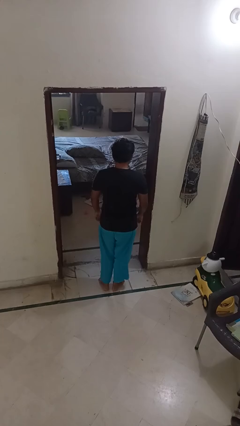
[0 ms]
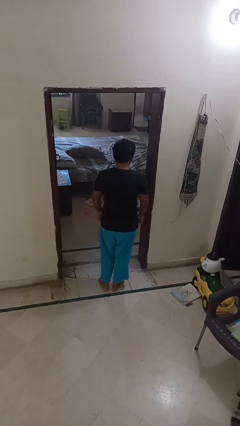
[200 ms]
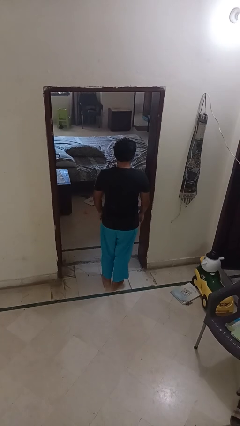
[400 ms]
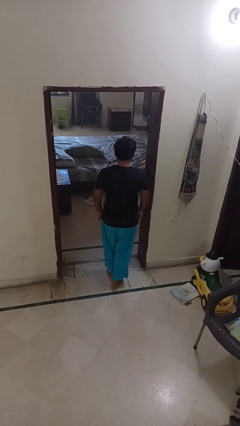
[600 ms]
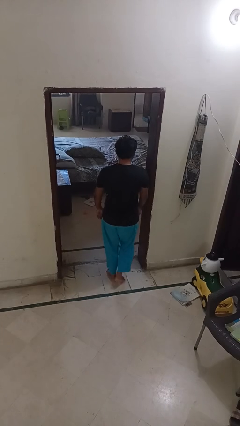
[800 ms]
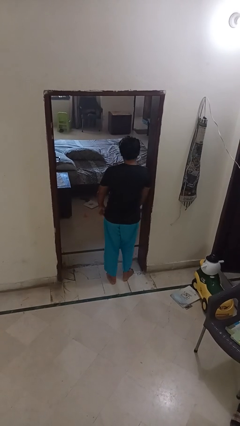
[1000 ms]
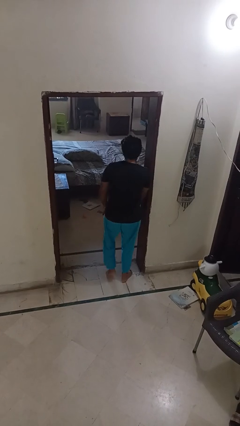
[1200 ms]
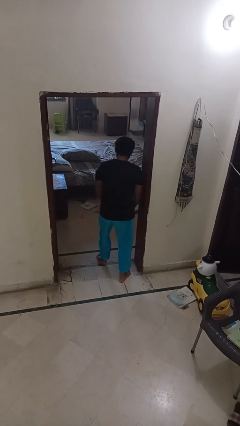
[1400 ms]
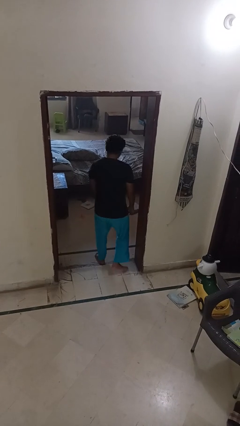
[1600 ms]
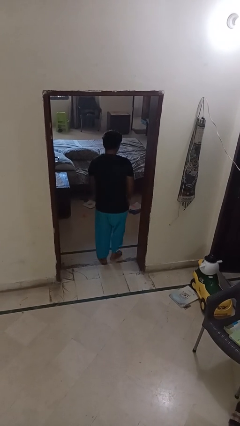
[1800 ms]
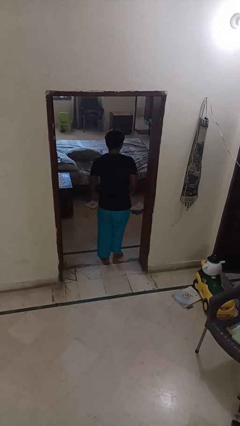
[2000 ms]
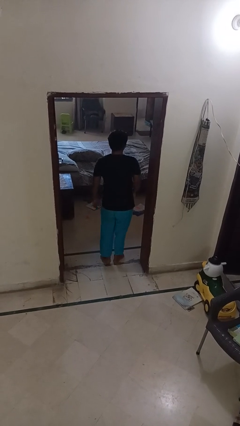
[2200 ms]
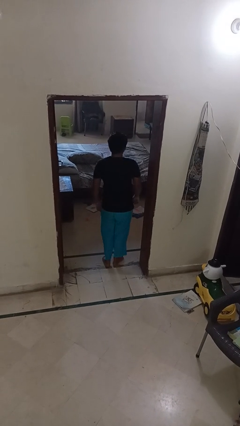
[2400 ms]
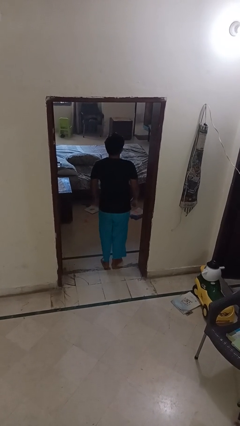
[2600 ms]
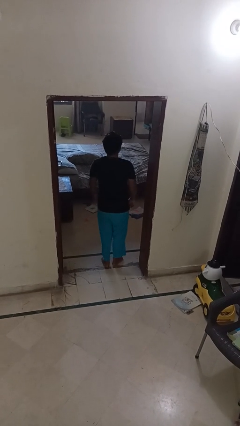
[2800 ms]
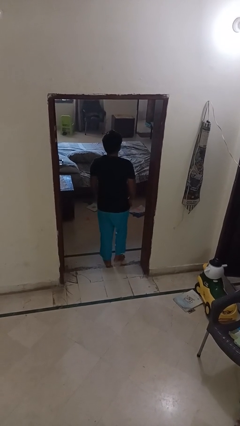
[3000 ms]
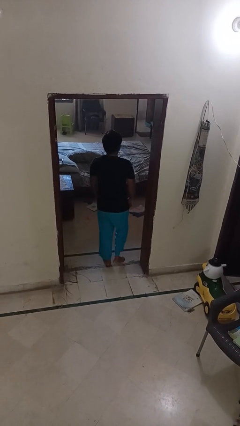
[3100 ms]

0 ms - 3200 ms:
person bumps into wall

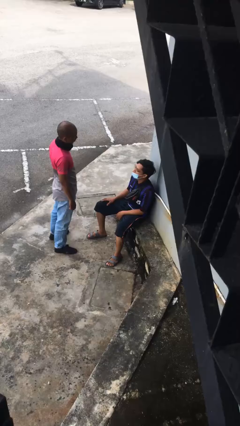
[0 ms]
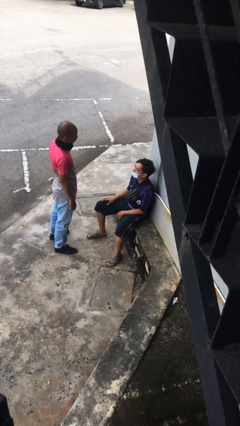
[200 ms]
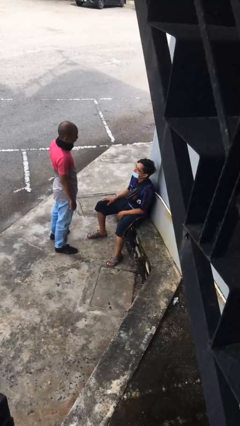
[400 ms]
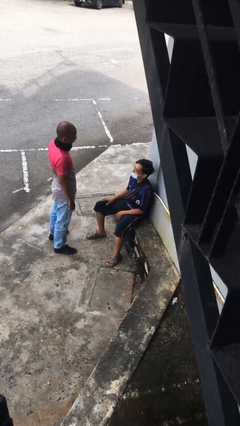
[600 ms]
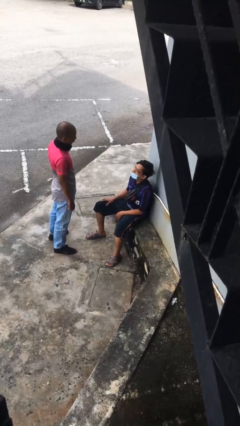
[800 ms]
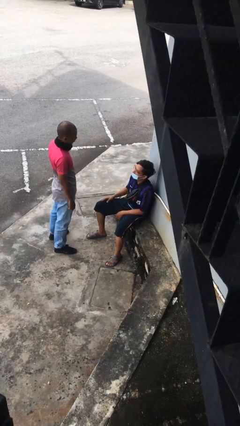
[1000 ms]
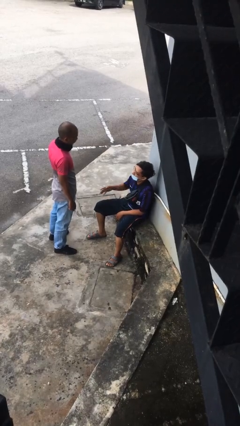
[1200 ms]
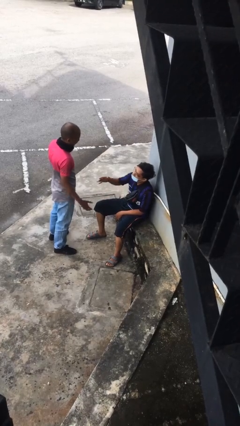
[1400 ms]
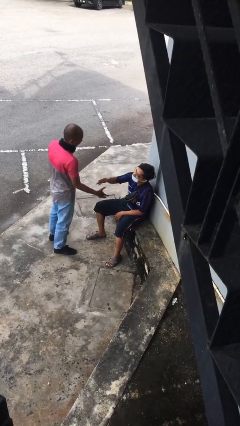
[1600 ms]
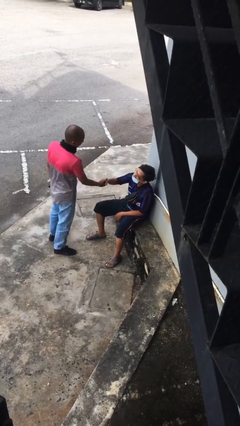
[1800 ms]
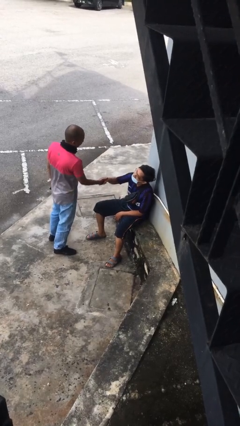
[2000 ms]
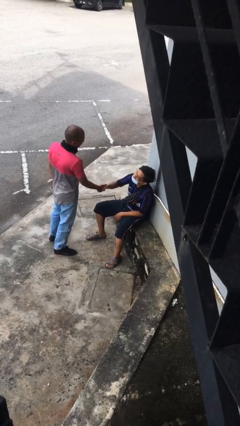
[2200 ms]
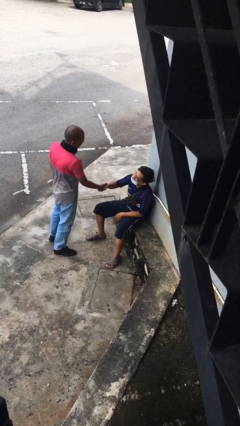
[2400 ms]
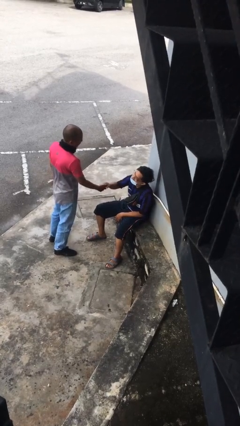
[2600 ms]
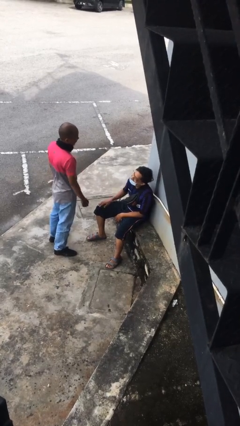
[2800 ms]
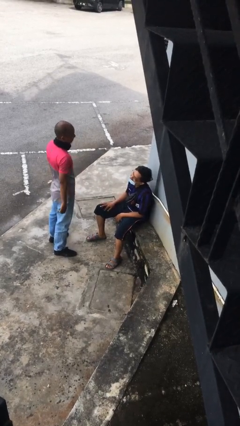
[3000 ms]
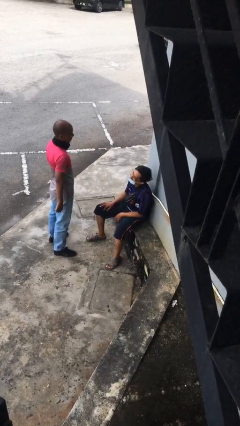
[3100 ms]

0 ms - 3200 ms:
person shakes hand

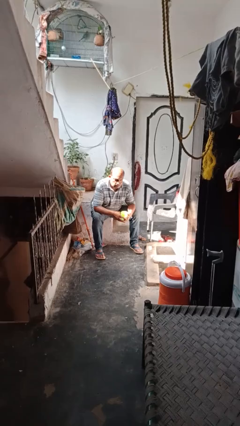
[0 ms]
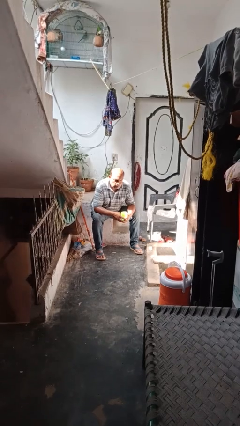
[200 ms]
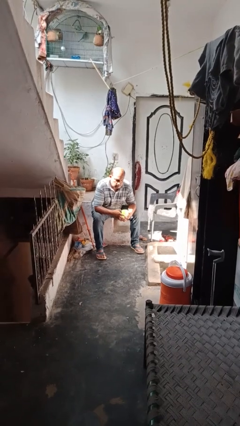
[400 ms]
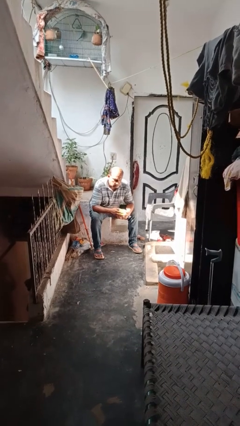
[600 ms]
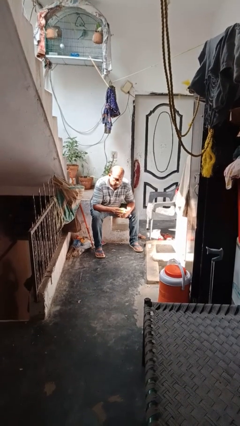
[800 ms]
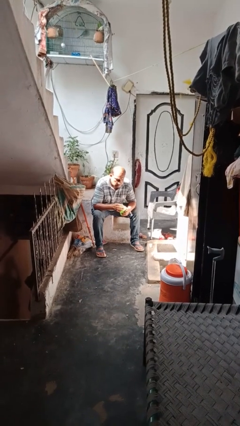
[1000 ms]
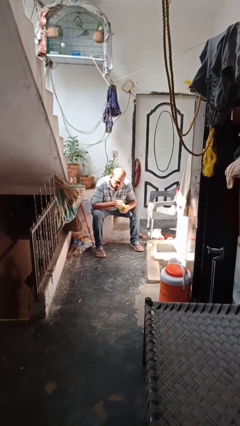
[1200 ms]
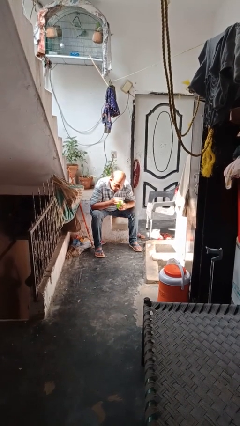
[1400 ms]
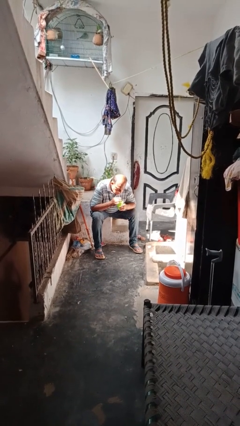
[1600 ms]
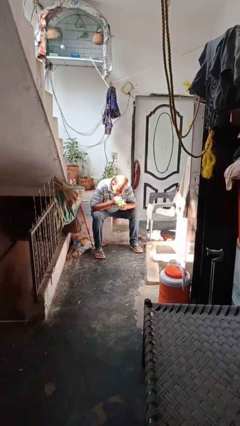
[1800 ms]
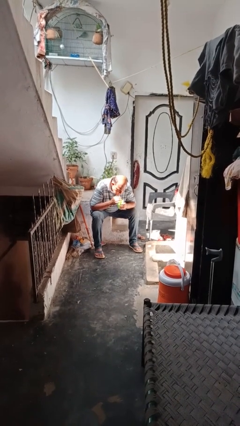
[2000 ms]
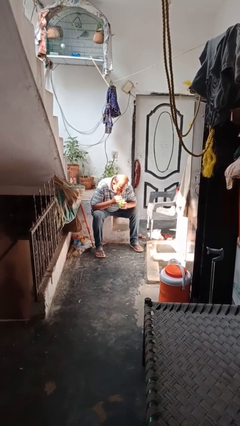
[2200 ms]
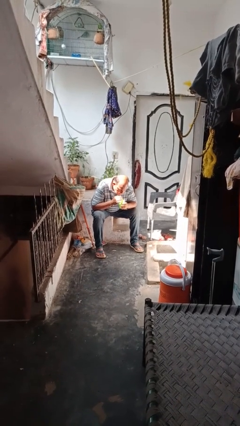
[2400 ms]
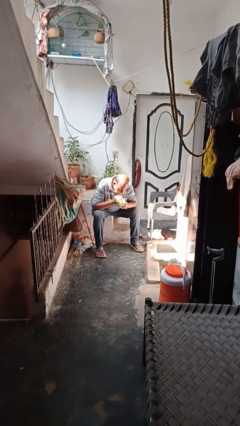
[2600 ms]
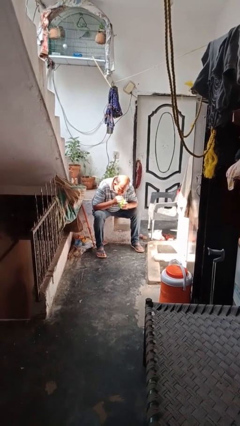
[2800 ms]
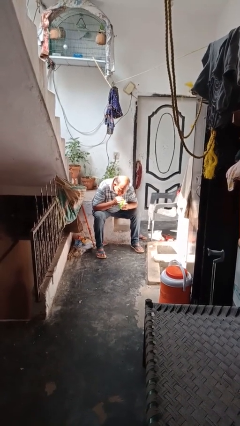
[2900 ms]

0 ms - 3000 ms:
person drinks from straw

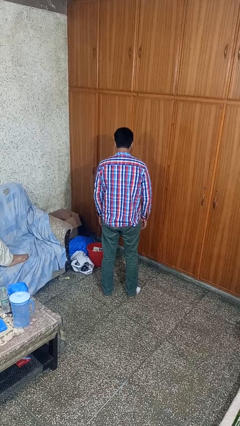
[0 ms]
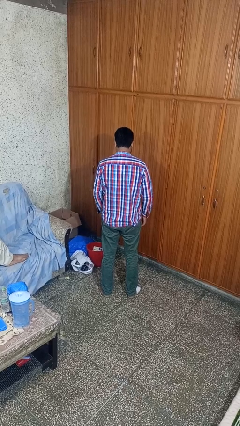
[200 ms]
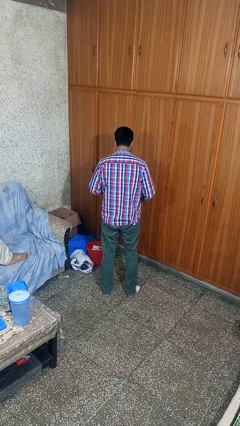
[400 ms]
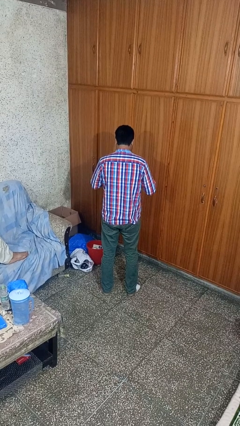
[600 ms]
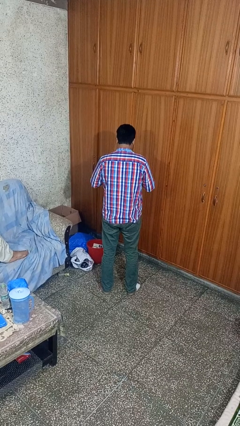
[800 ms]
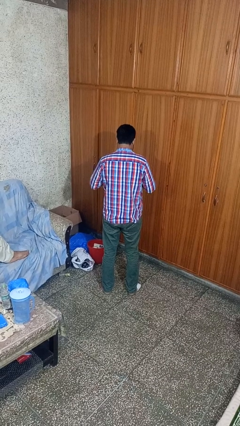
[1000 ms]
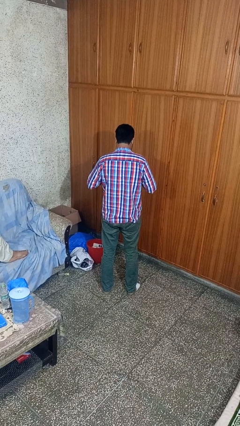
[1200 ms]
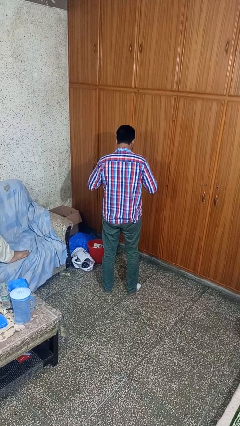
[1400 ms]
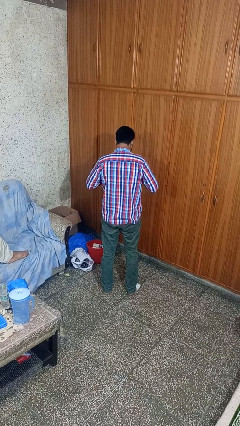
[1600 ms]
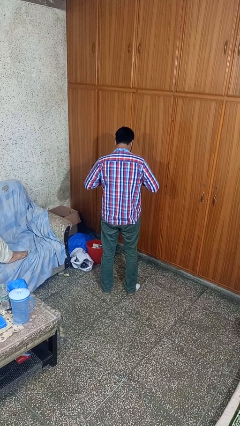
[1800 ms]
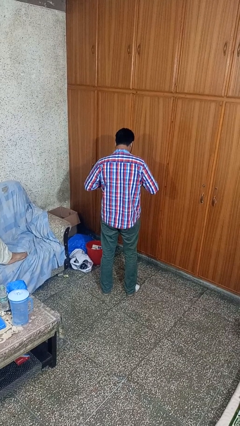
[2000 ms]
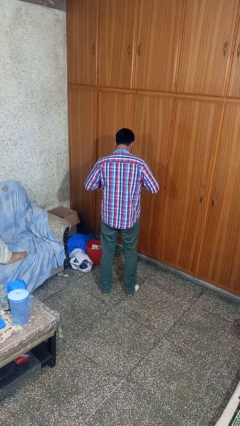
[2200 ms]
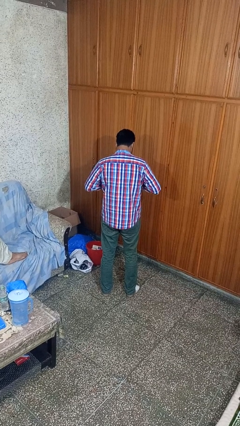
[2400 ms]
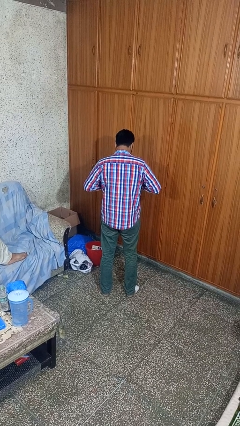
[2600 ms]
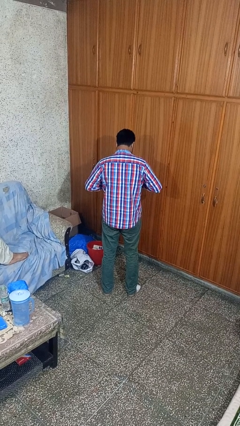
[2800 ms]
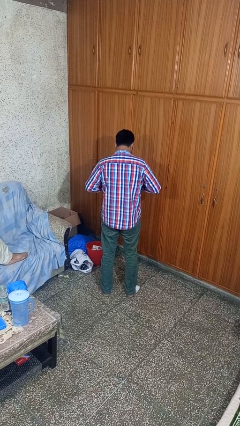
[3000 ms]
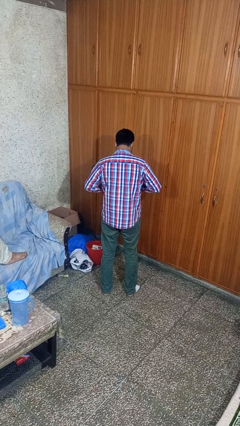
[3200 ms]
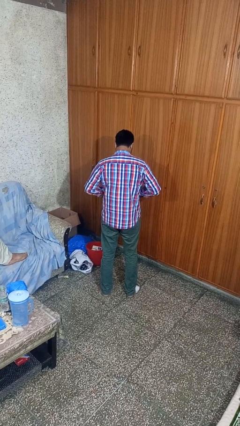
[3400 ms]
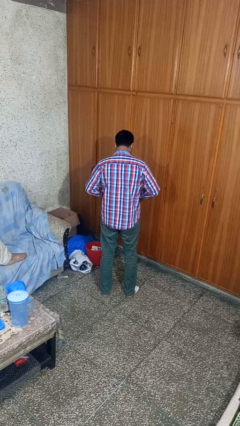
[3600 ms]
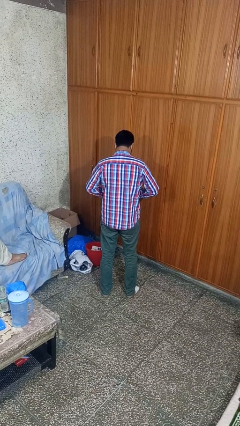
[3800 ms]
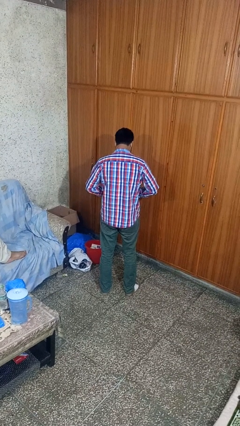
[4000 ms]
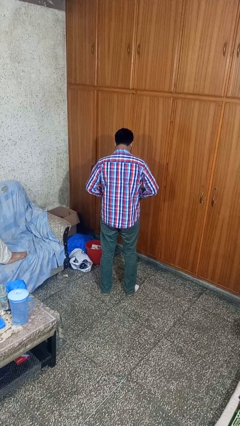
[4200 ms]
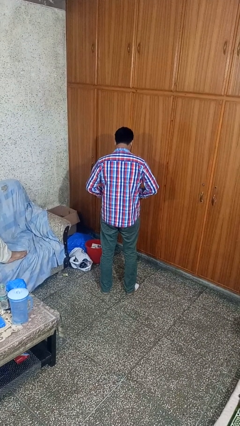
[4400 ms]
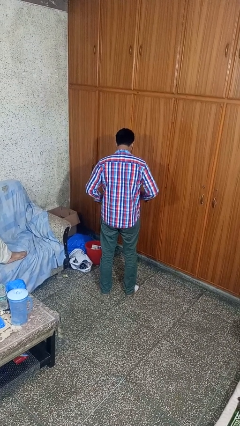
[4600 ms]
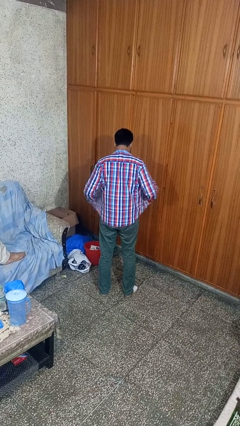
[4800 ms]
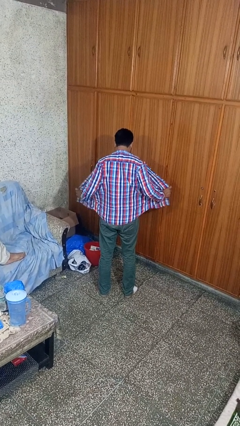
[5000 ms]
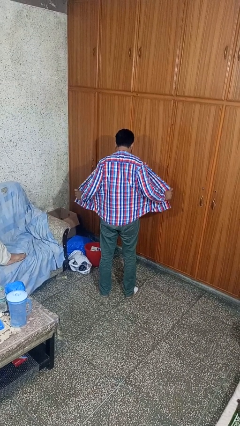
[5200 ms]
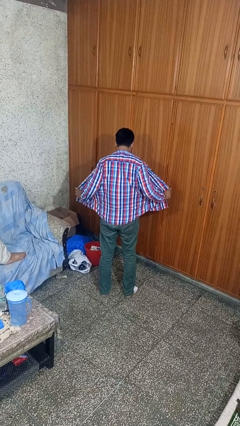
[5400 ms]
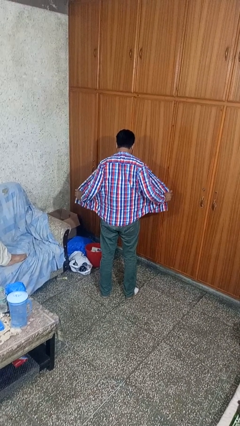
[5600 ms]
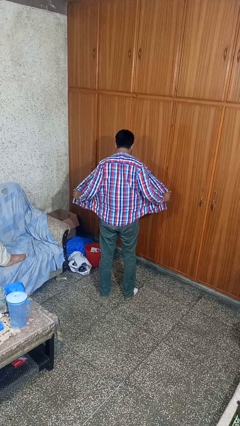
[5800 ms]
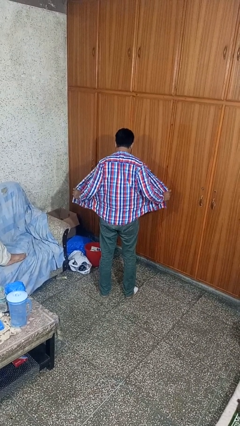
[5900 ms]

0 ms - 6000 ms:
person unbuttons shirt

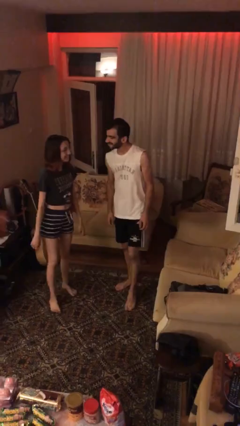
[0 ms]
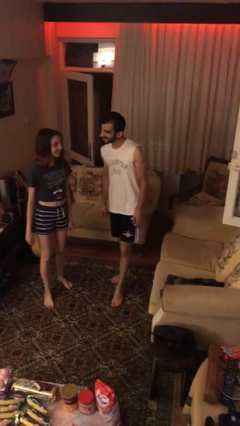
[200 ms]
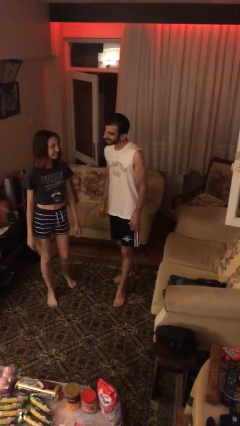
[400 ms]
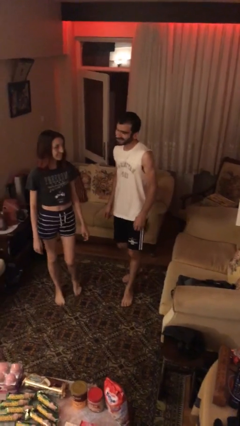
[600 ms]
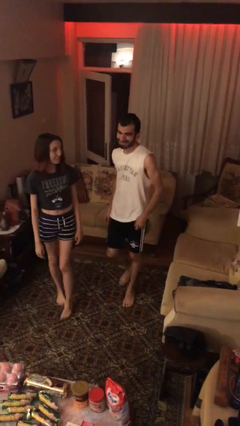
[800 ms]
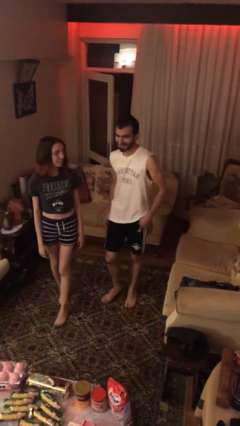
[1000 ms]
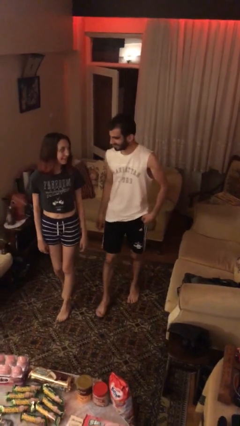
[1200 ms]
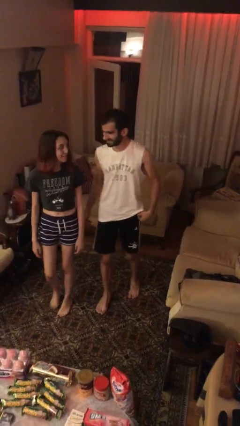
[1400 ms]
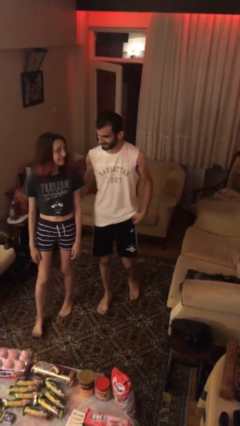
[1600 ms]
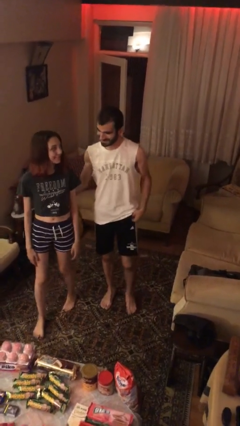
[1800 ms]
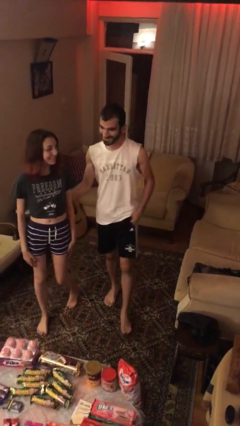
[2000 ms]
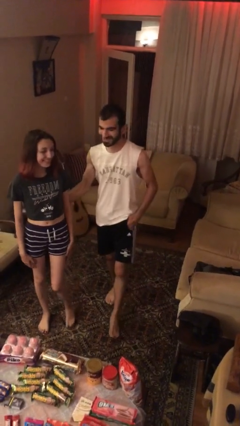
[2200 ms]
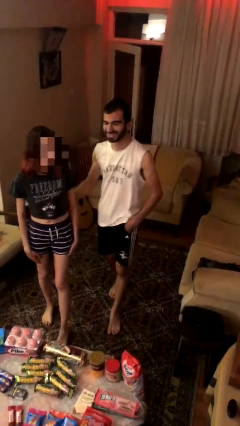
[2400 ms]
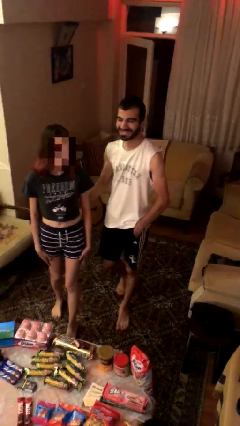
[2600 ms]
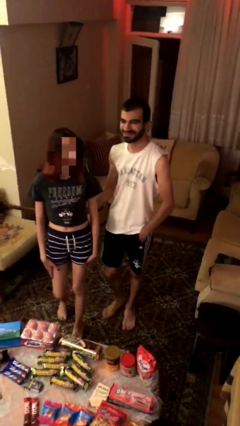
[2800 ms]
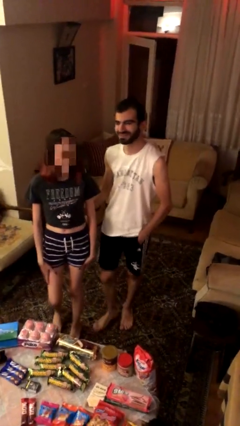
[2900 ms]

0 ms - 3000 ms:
person talks to person
